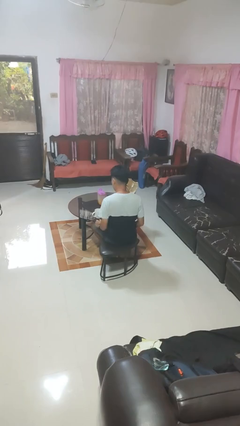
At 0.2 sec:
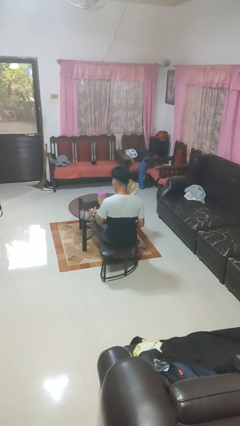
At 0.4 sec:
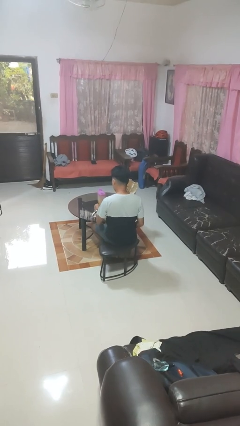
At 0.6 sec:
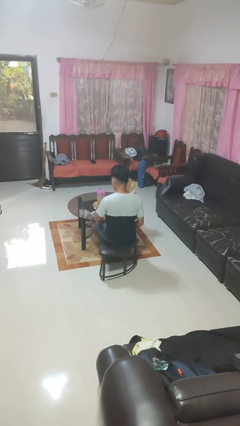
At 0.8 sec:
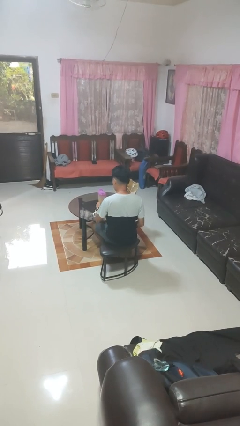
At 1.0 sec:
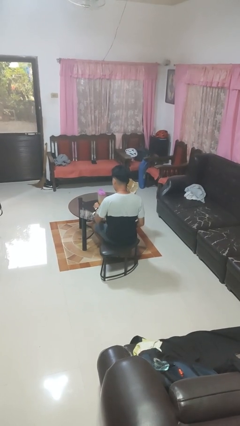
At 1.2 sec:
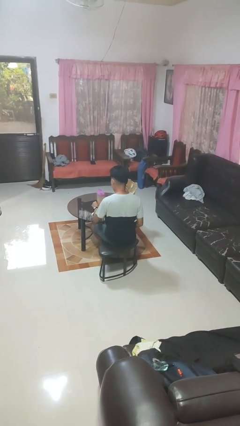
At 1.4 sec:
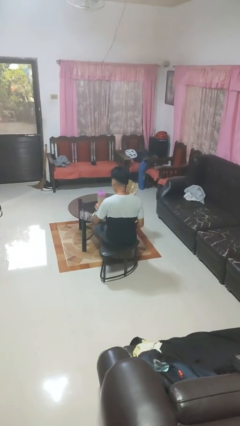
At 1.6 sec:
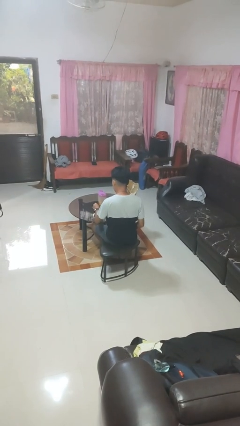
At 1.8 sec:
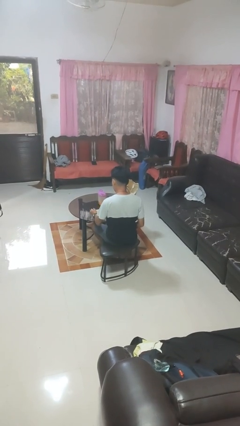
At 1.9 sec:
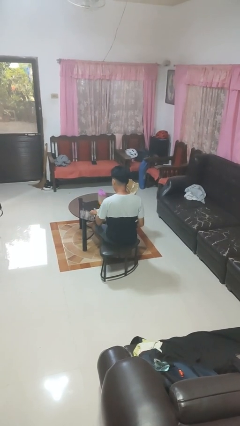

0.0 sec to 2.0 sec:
person stirs mug

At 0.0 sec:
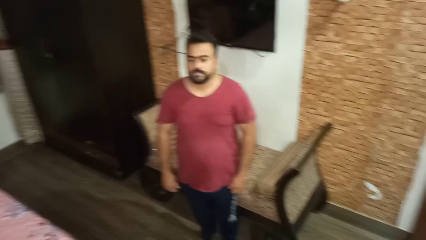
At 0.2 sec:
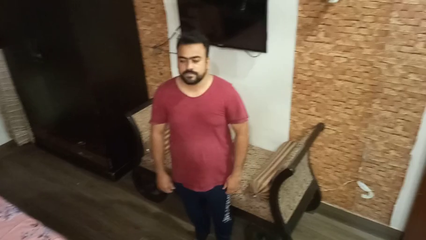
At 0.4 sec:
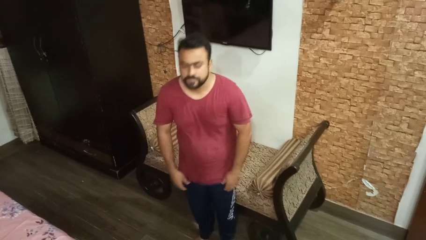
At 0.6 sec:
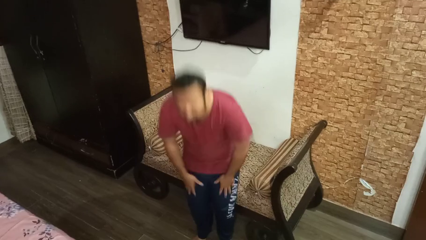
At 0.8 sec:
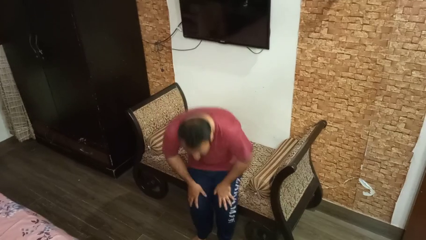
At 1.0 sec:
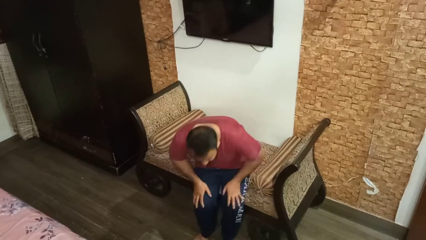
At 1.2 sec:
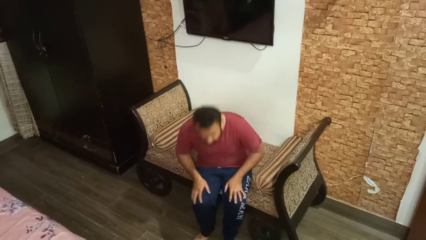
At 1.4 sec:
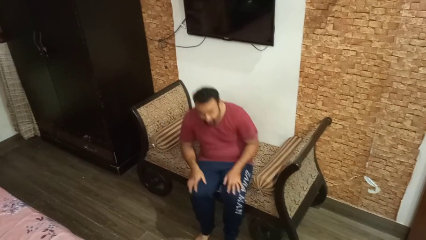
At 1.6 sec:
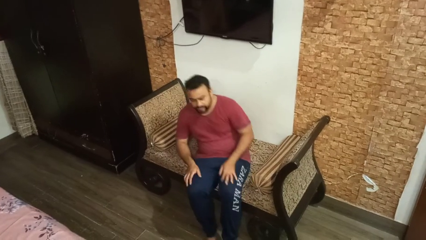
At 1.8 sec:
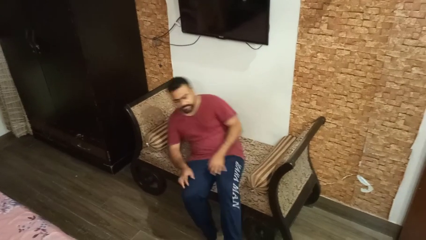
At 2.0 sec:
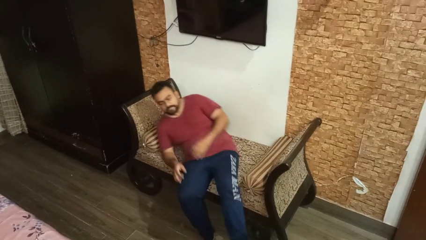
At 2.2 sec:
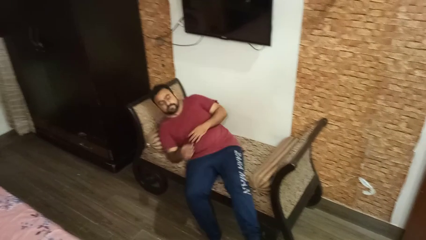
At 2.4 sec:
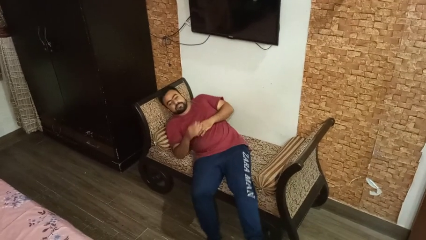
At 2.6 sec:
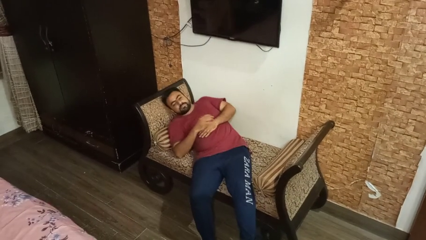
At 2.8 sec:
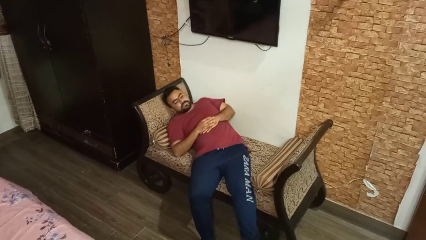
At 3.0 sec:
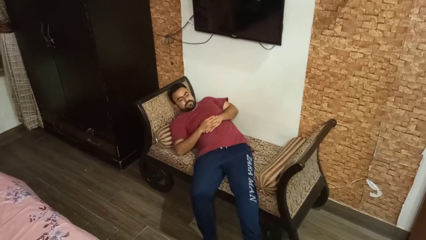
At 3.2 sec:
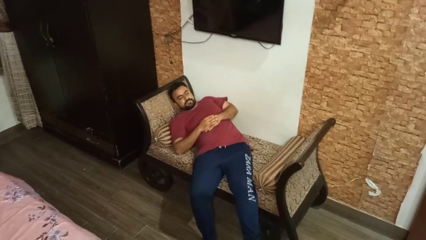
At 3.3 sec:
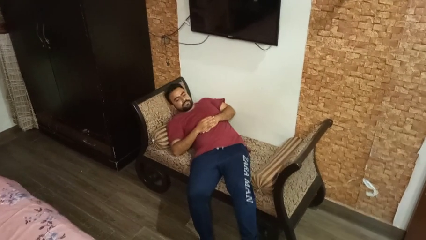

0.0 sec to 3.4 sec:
person lies down on couch

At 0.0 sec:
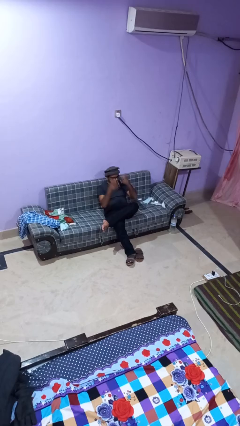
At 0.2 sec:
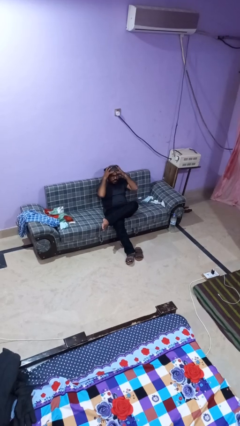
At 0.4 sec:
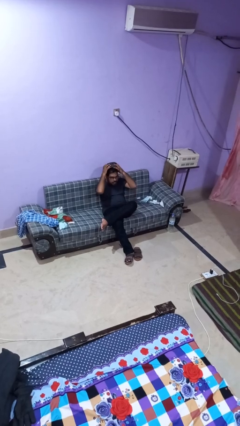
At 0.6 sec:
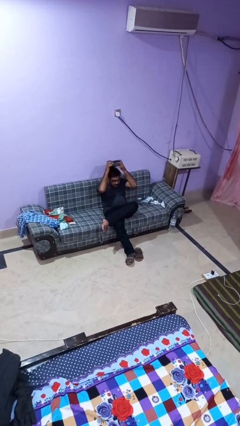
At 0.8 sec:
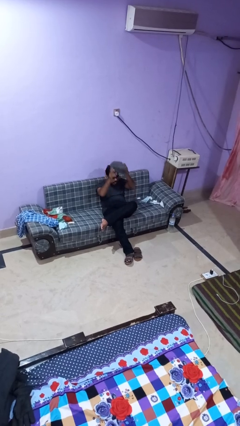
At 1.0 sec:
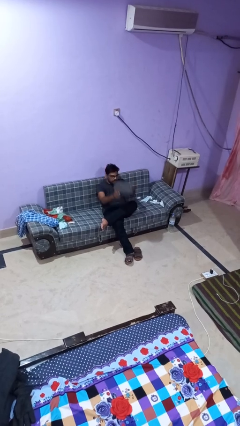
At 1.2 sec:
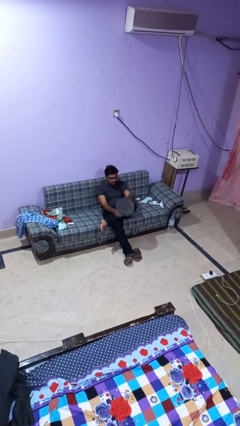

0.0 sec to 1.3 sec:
person takes off hat

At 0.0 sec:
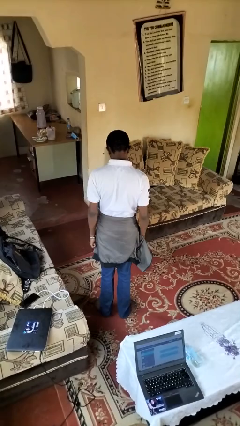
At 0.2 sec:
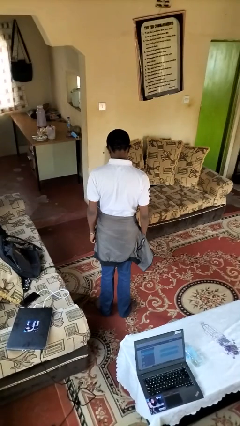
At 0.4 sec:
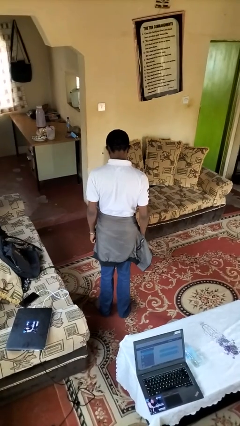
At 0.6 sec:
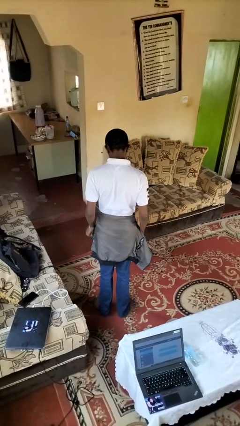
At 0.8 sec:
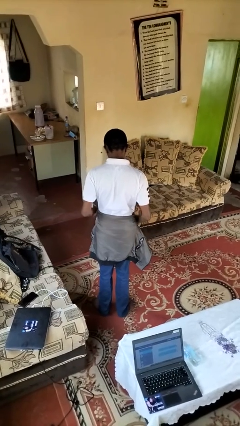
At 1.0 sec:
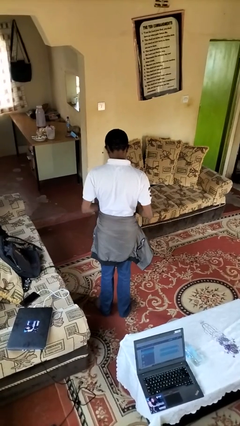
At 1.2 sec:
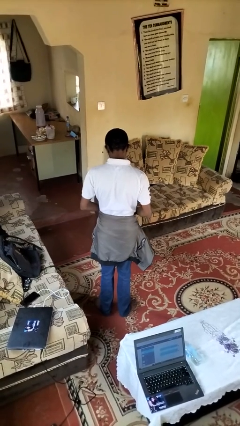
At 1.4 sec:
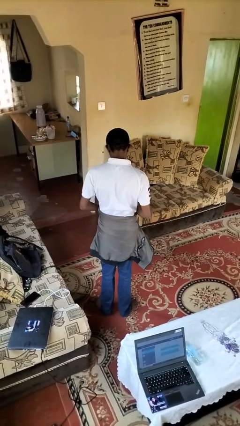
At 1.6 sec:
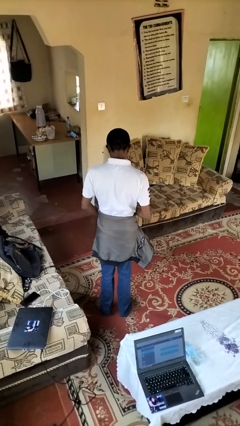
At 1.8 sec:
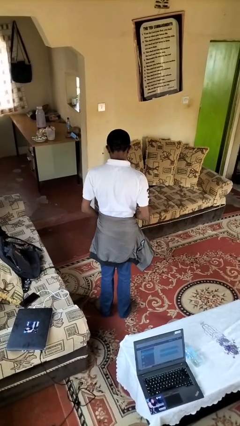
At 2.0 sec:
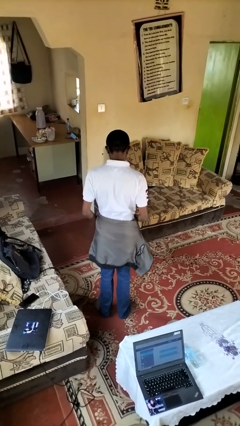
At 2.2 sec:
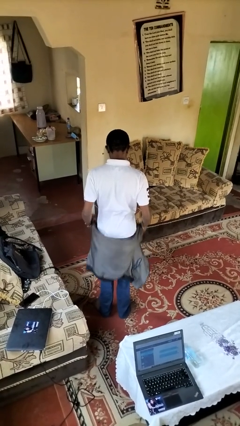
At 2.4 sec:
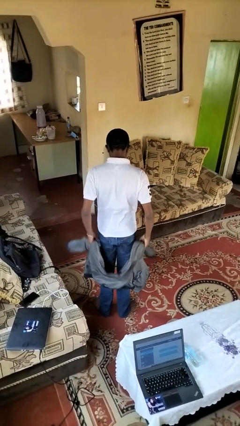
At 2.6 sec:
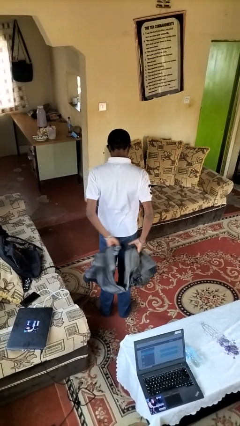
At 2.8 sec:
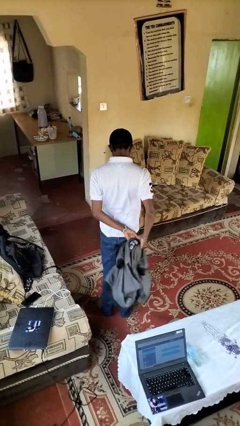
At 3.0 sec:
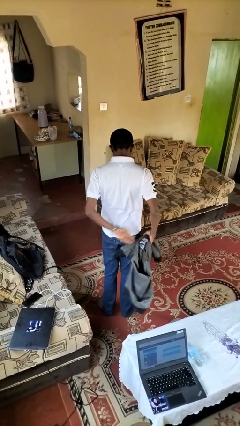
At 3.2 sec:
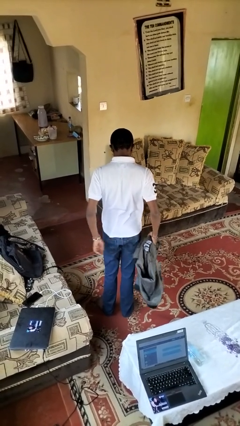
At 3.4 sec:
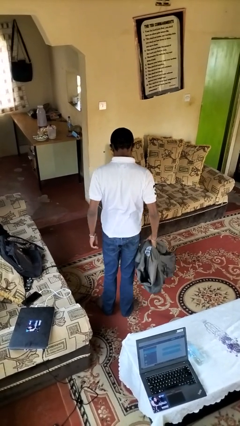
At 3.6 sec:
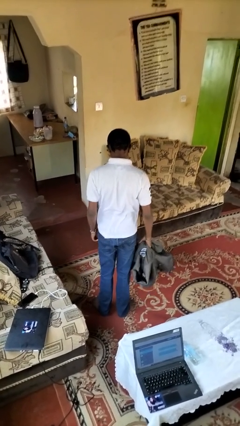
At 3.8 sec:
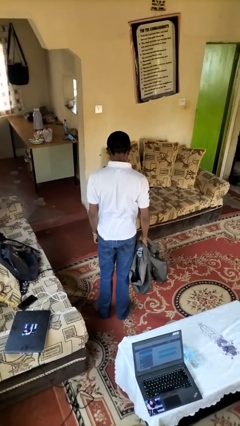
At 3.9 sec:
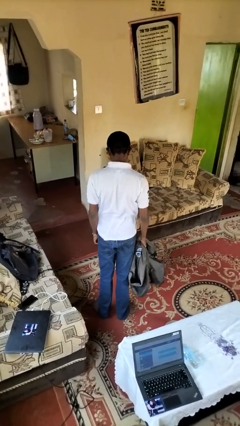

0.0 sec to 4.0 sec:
person unties jacket around waist

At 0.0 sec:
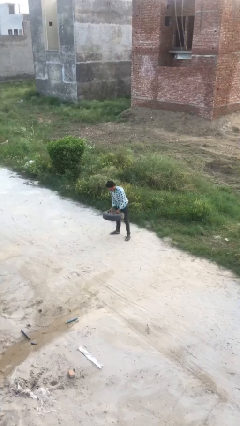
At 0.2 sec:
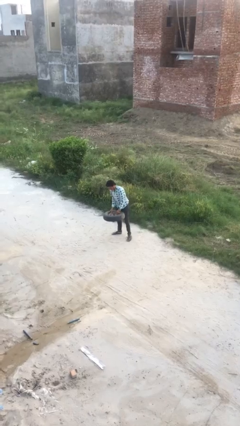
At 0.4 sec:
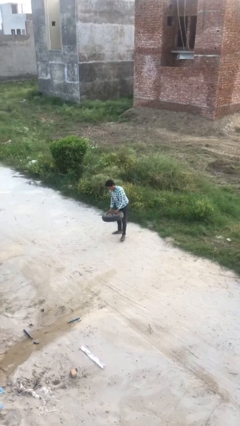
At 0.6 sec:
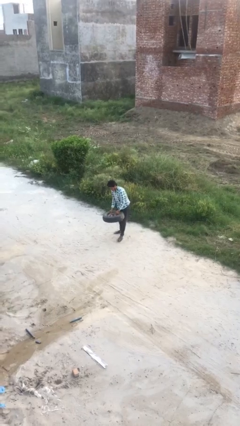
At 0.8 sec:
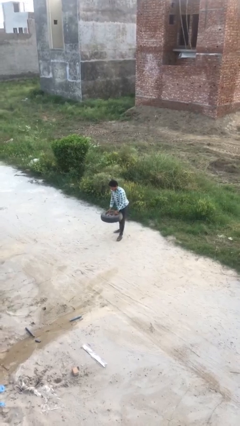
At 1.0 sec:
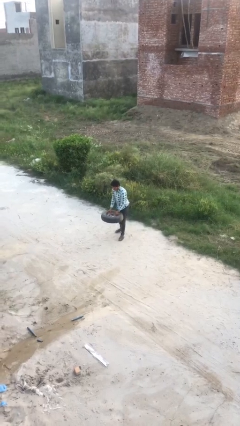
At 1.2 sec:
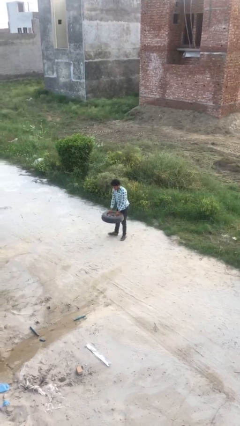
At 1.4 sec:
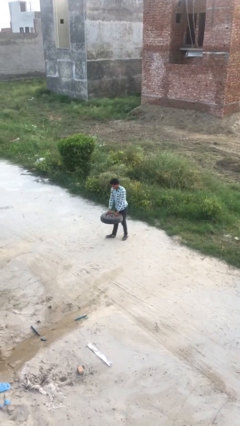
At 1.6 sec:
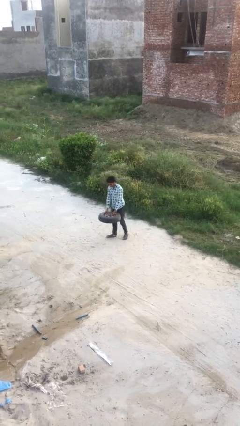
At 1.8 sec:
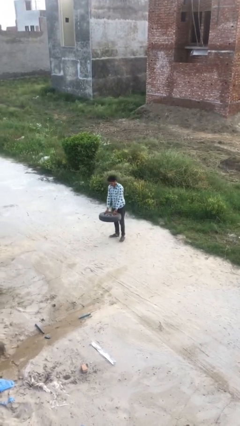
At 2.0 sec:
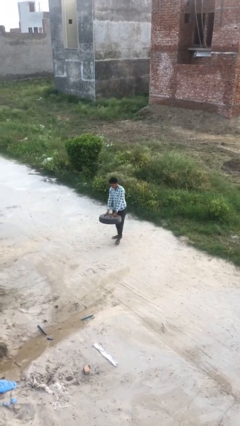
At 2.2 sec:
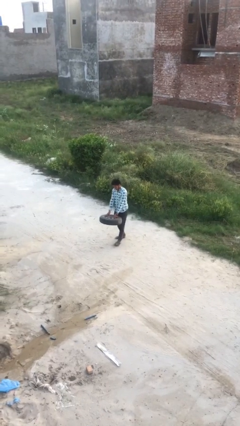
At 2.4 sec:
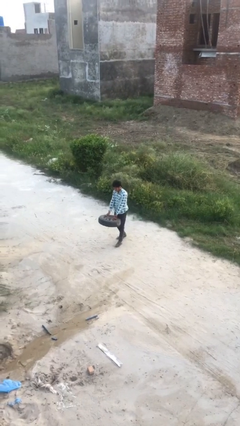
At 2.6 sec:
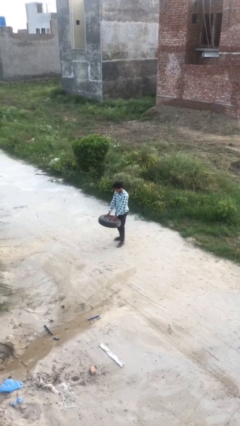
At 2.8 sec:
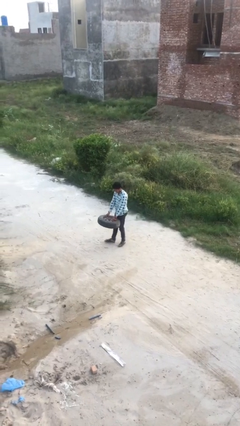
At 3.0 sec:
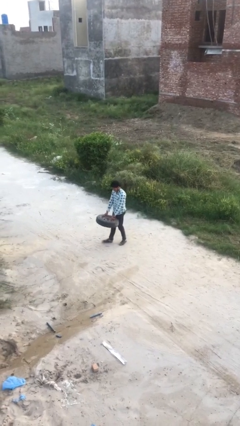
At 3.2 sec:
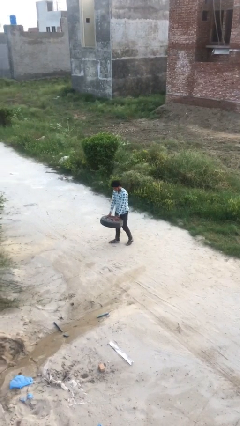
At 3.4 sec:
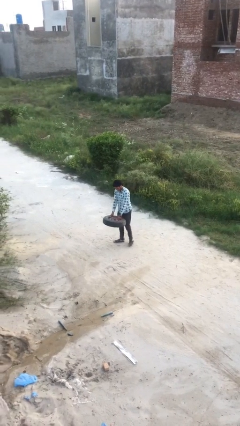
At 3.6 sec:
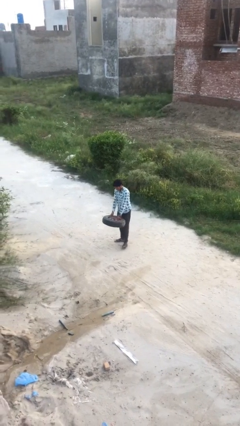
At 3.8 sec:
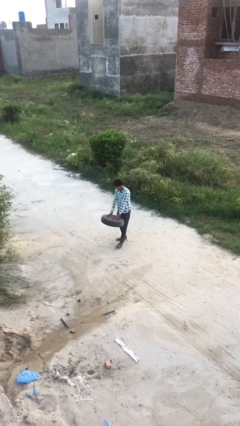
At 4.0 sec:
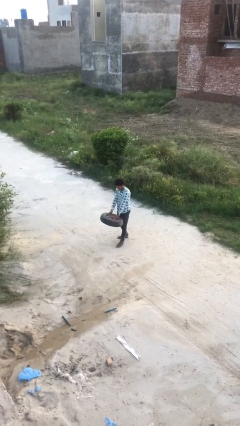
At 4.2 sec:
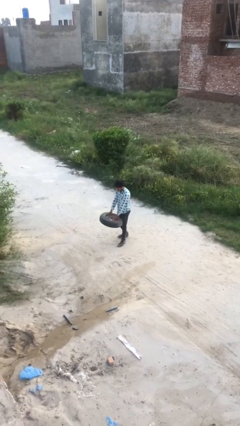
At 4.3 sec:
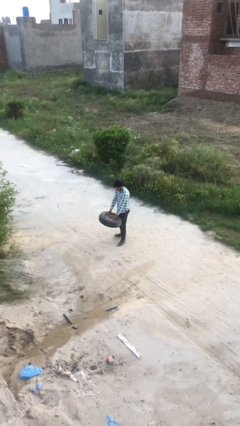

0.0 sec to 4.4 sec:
person carries heavy object

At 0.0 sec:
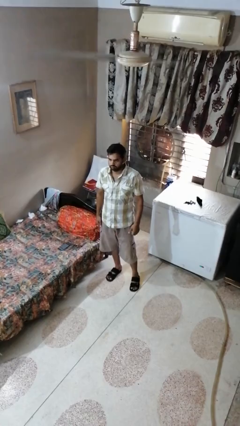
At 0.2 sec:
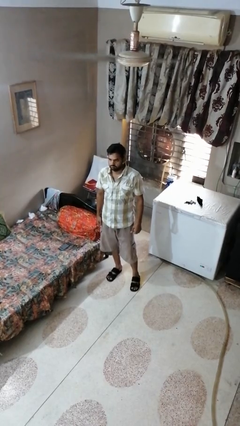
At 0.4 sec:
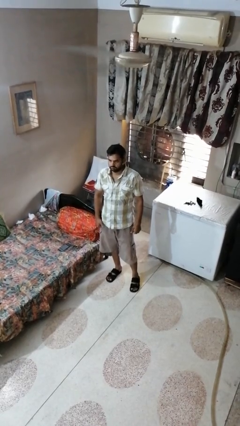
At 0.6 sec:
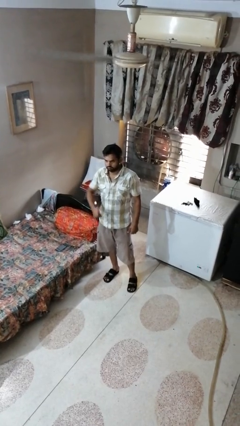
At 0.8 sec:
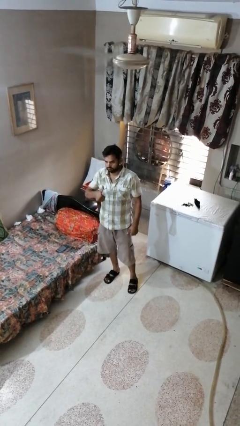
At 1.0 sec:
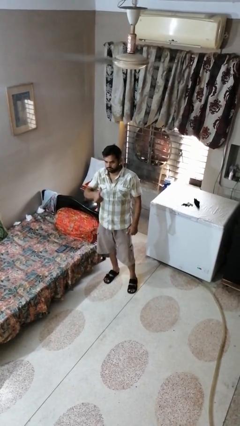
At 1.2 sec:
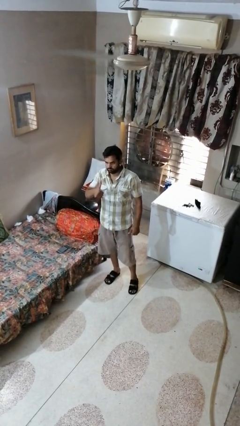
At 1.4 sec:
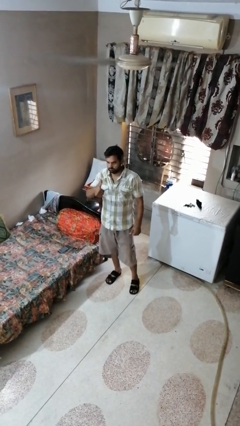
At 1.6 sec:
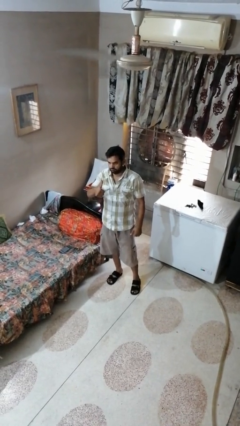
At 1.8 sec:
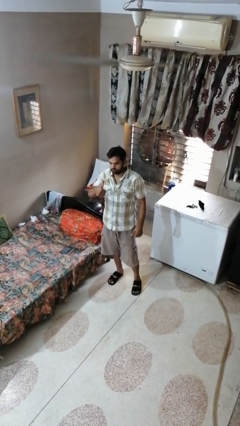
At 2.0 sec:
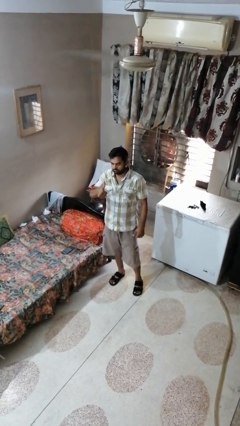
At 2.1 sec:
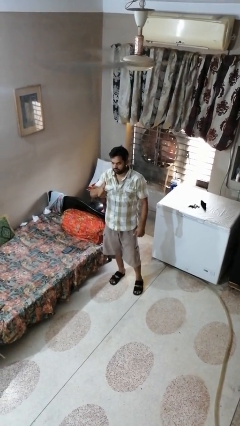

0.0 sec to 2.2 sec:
person gestures thumbs up
